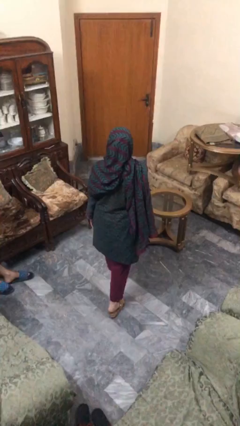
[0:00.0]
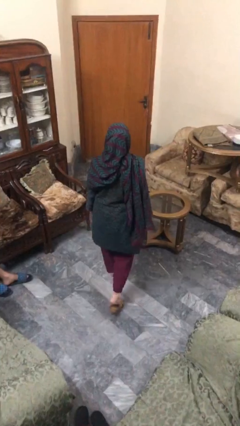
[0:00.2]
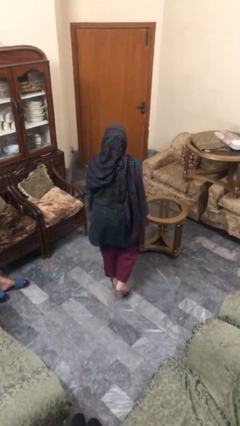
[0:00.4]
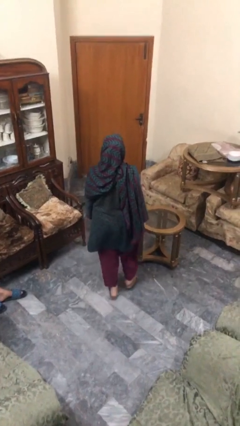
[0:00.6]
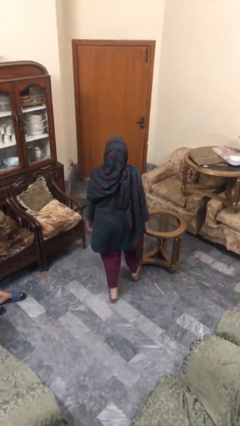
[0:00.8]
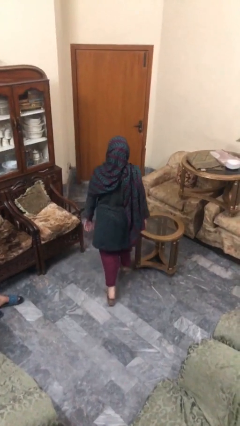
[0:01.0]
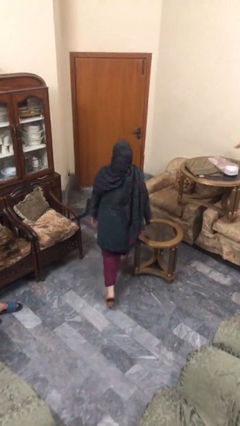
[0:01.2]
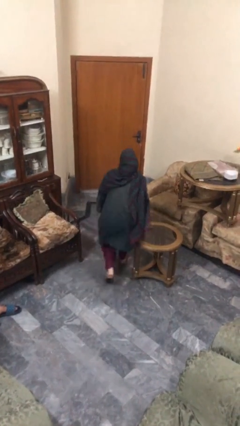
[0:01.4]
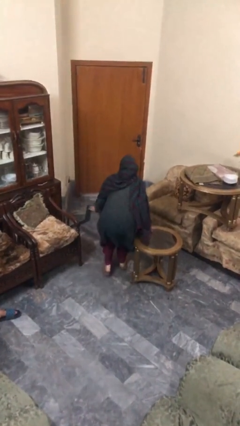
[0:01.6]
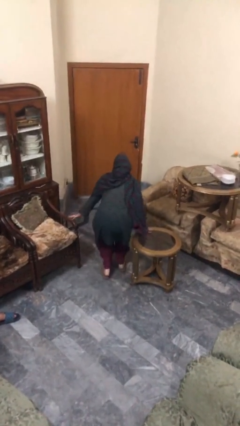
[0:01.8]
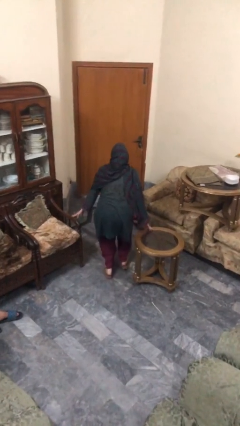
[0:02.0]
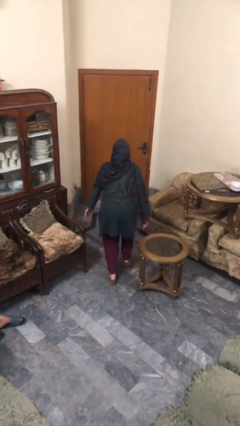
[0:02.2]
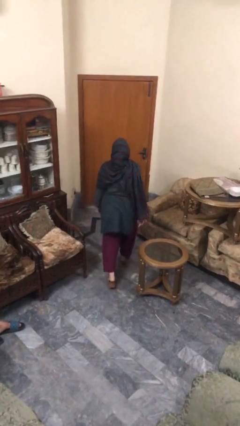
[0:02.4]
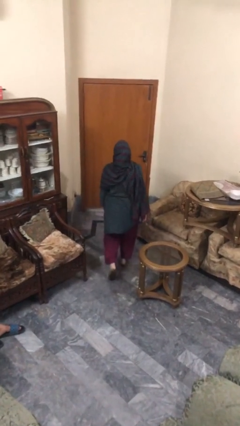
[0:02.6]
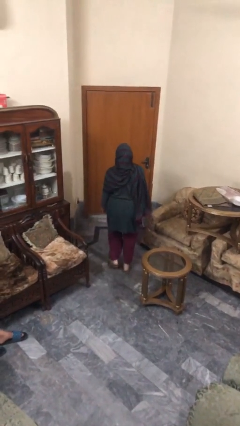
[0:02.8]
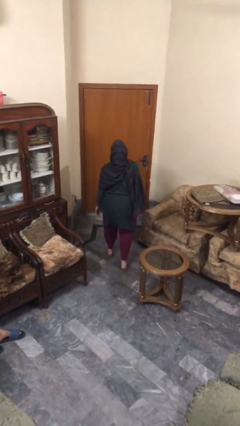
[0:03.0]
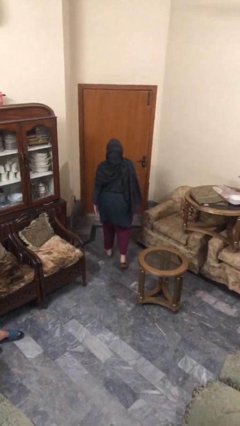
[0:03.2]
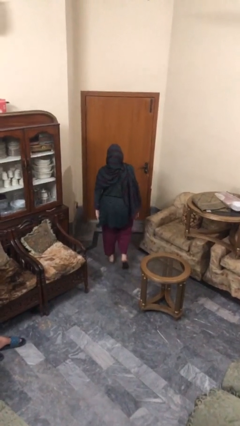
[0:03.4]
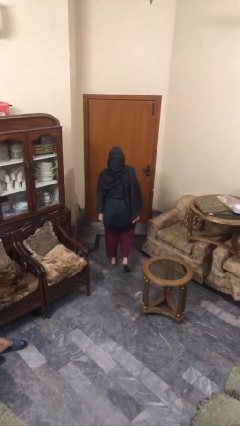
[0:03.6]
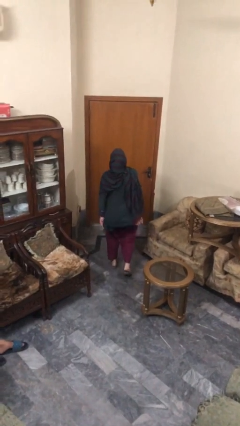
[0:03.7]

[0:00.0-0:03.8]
person bumps into table

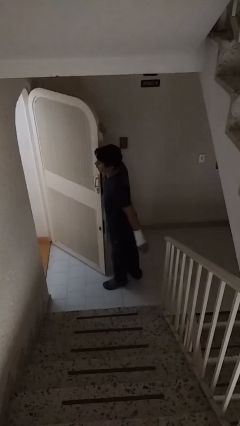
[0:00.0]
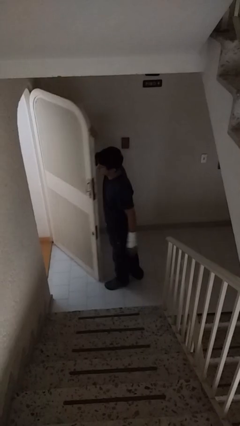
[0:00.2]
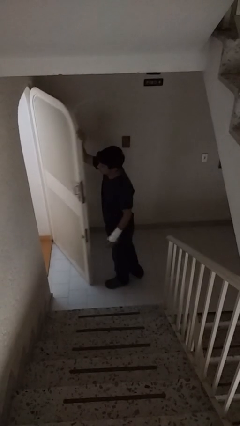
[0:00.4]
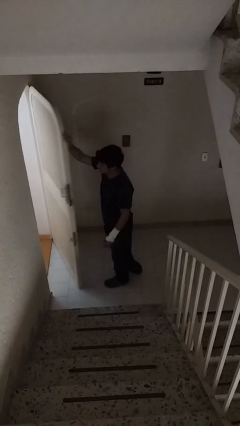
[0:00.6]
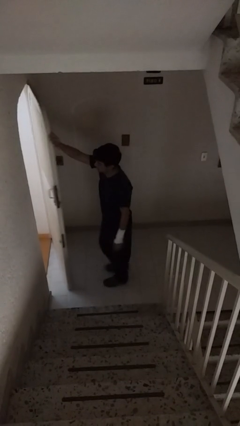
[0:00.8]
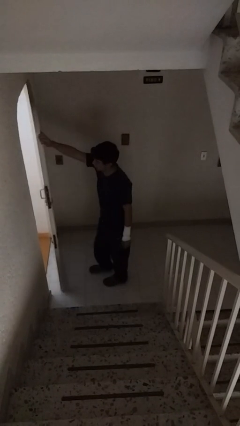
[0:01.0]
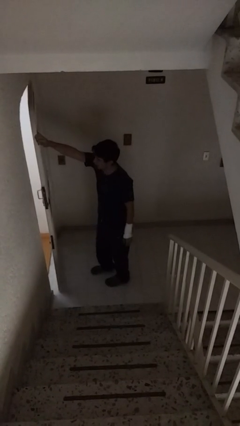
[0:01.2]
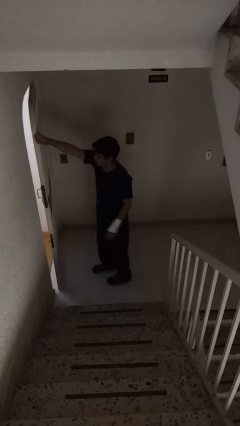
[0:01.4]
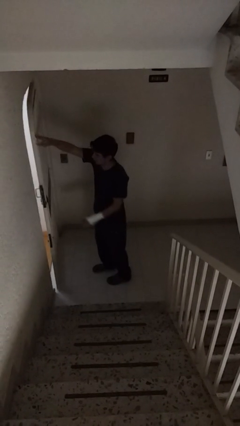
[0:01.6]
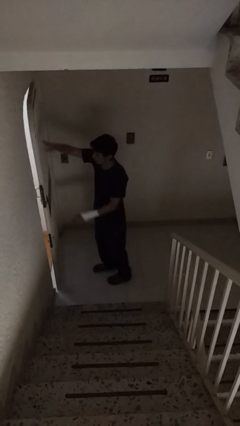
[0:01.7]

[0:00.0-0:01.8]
person closes facility door

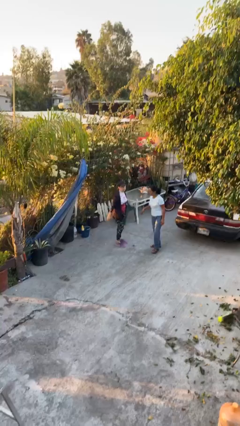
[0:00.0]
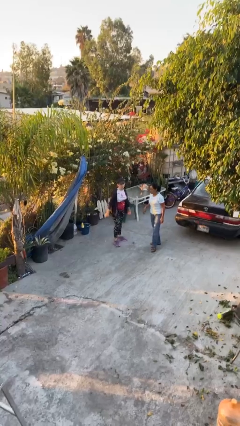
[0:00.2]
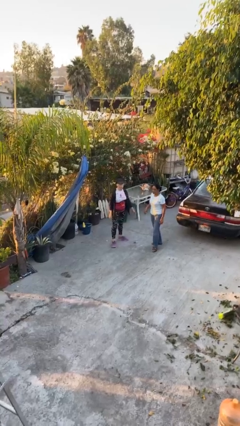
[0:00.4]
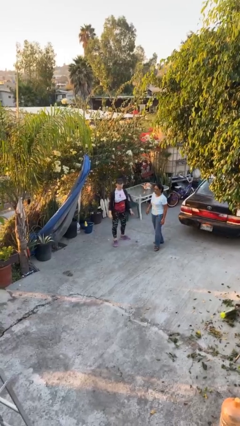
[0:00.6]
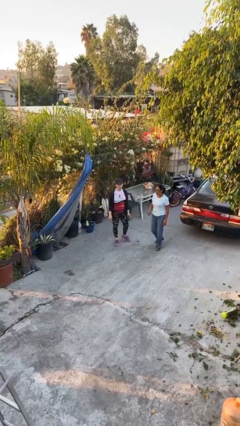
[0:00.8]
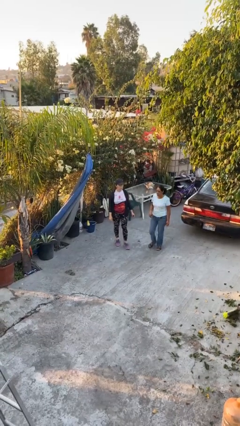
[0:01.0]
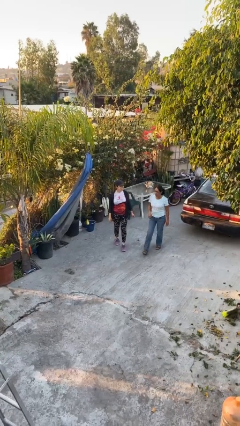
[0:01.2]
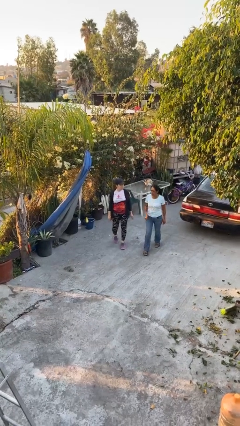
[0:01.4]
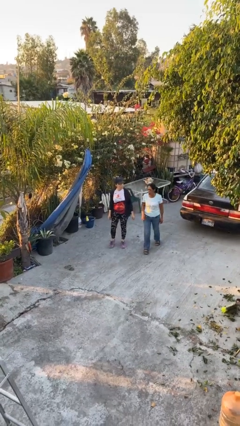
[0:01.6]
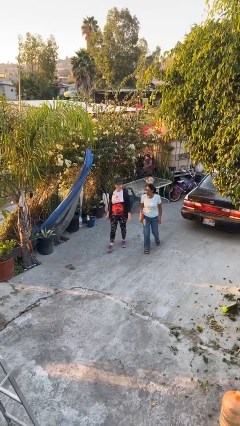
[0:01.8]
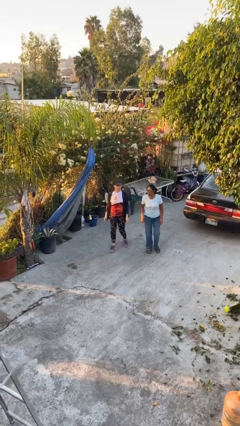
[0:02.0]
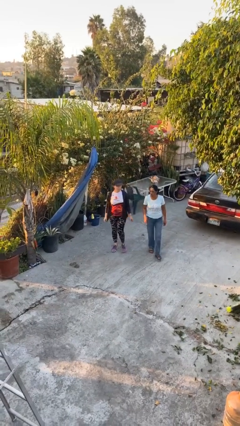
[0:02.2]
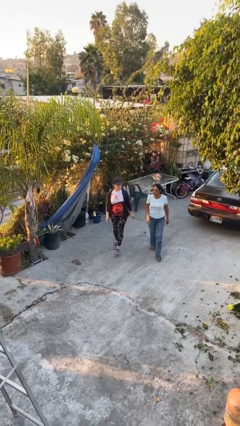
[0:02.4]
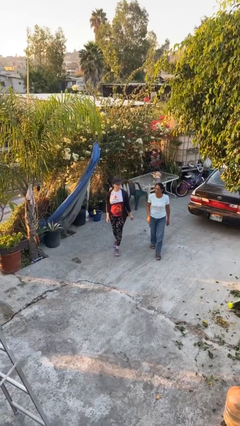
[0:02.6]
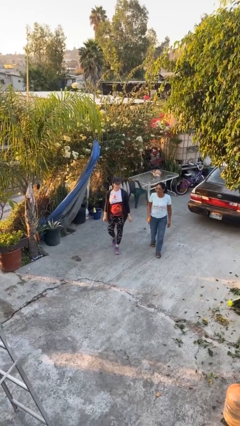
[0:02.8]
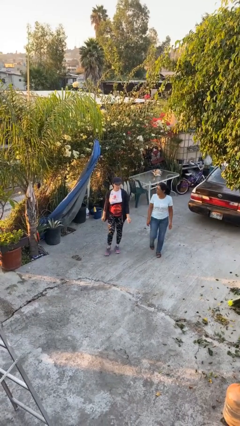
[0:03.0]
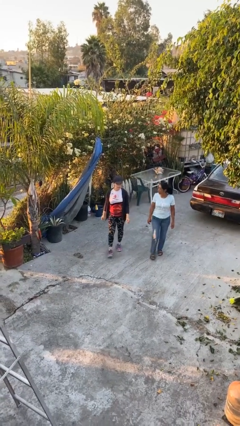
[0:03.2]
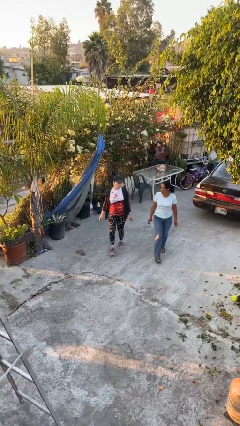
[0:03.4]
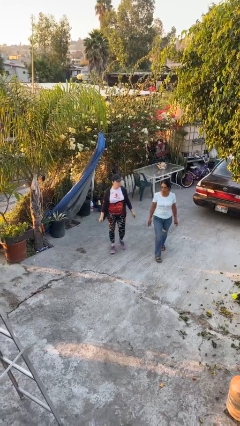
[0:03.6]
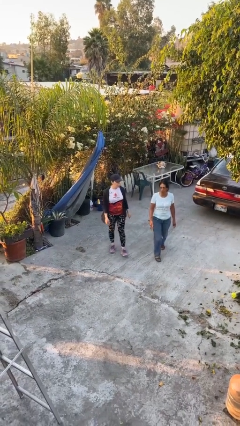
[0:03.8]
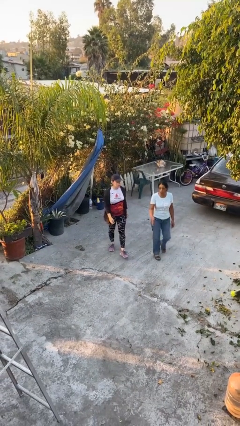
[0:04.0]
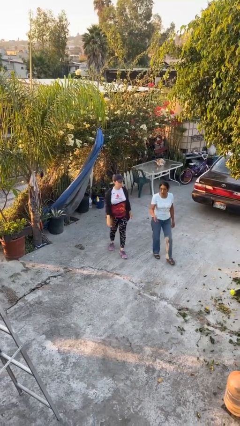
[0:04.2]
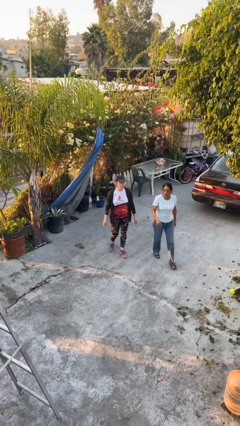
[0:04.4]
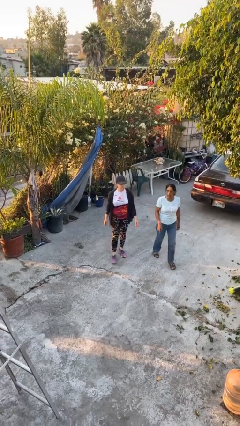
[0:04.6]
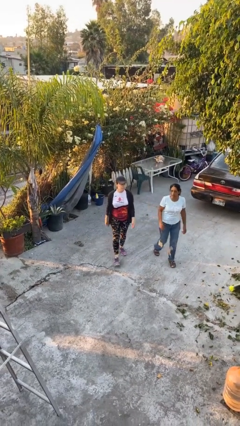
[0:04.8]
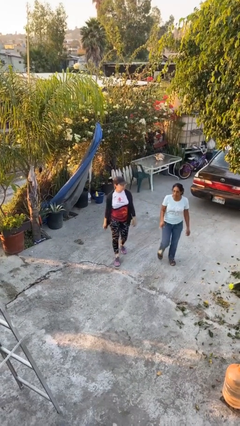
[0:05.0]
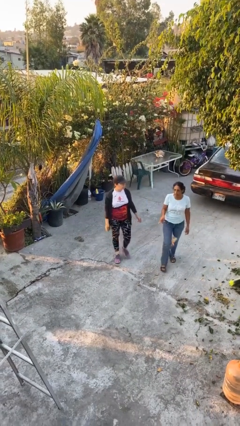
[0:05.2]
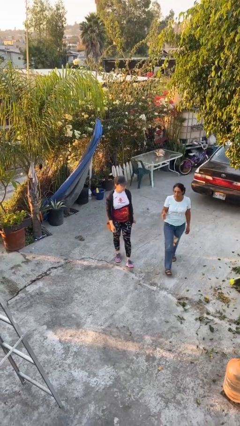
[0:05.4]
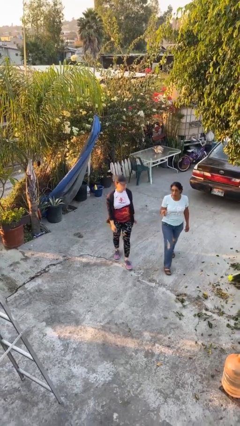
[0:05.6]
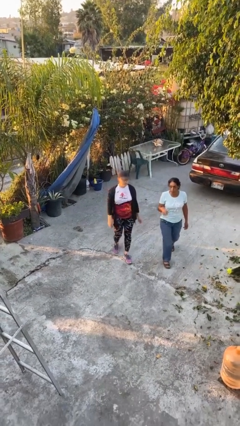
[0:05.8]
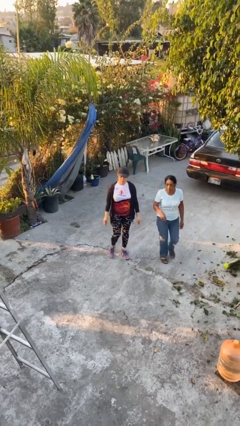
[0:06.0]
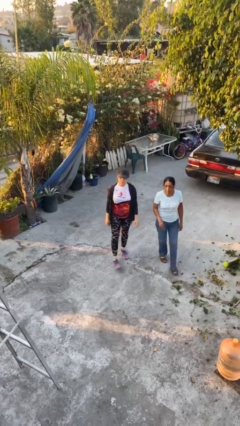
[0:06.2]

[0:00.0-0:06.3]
person talks to person

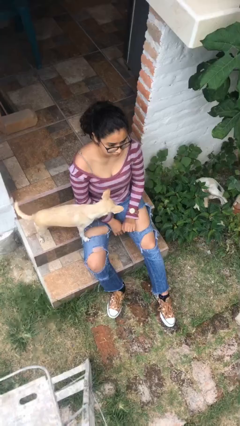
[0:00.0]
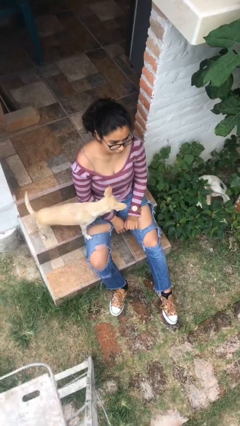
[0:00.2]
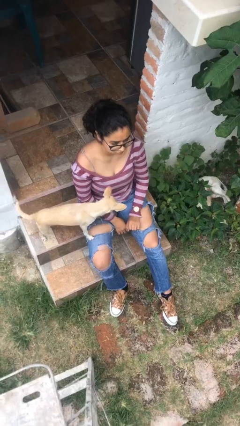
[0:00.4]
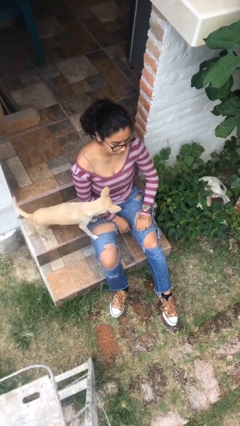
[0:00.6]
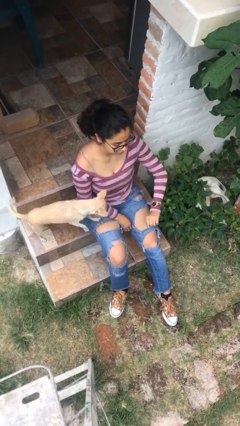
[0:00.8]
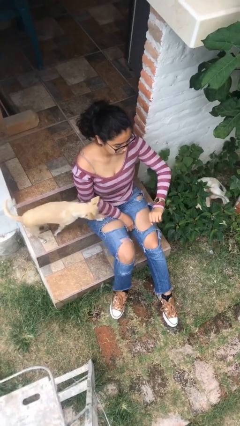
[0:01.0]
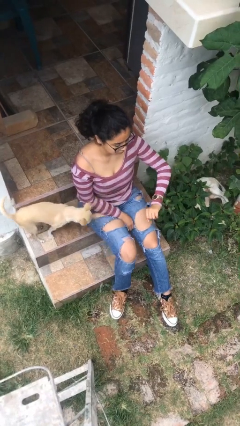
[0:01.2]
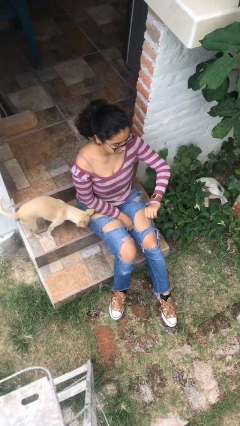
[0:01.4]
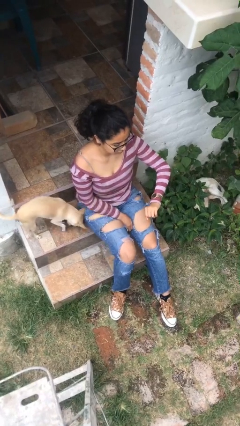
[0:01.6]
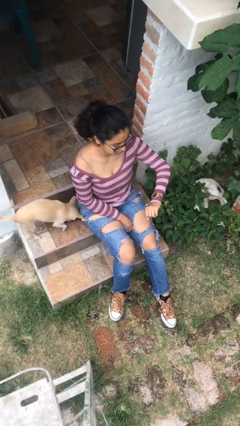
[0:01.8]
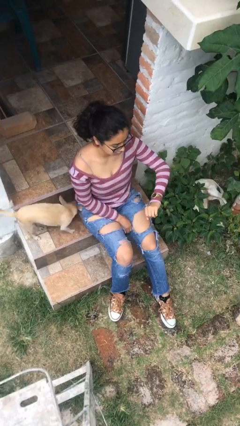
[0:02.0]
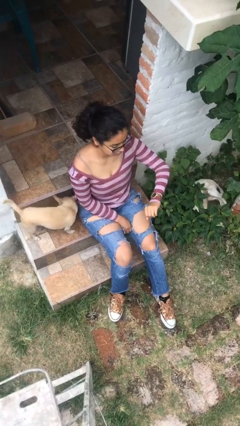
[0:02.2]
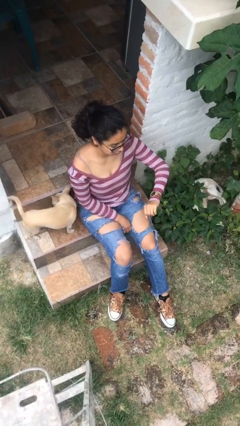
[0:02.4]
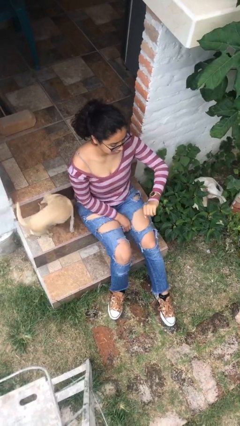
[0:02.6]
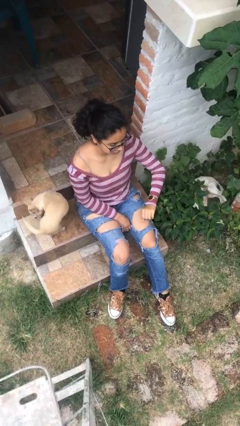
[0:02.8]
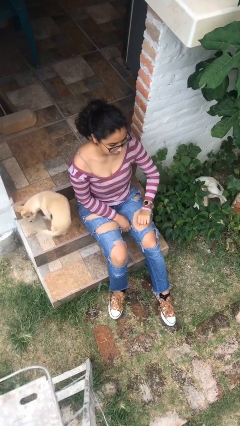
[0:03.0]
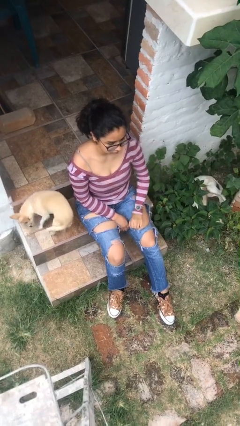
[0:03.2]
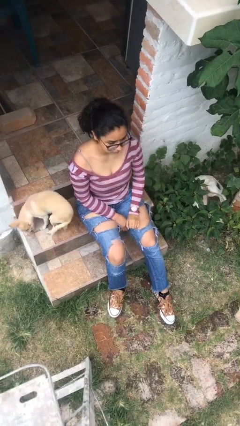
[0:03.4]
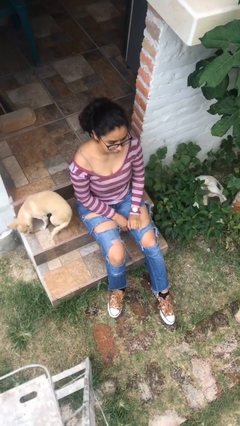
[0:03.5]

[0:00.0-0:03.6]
person looks at wristwatch

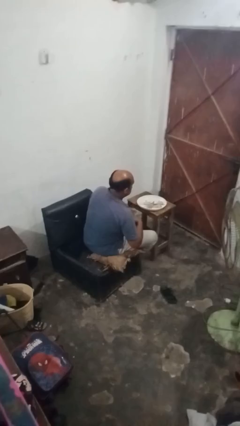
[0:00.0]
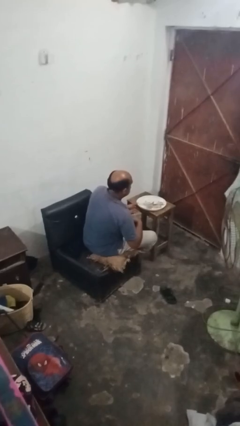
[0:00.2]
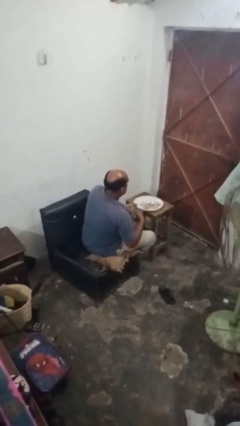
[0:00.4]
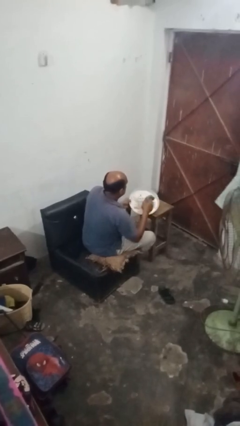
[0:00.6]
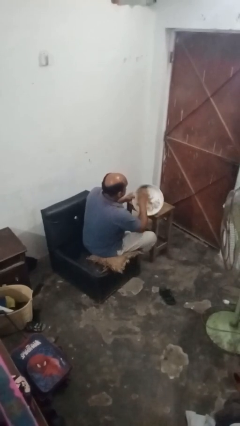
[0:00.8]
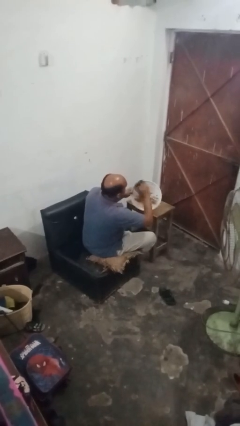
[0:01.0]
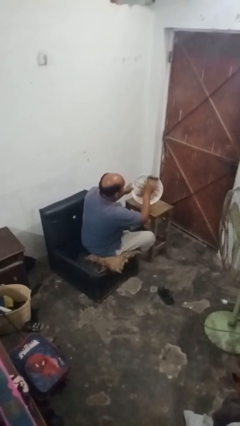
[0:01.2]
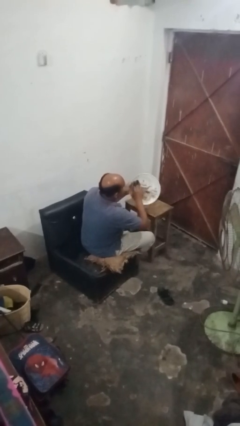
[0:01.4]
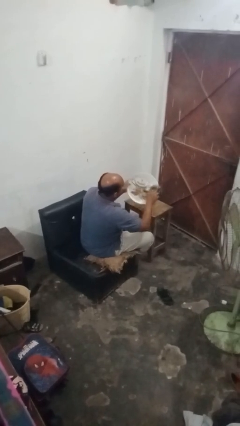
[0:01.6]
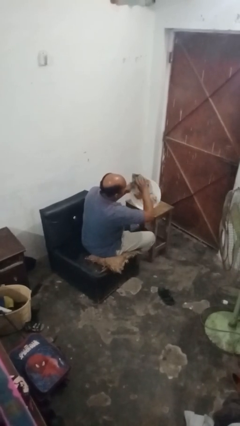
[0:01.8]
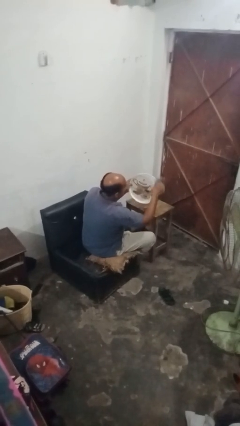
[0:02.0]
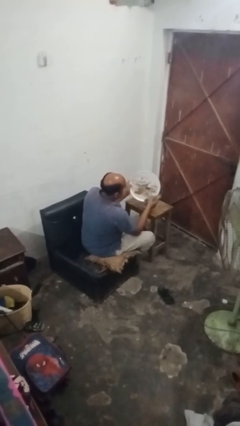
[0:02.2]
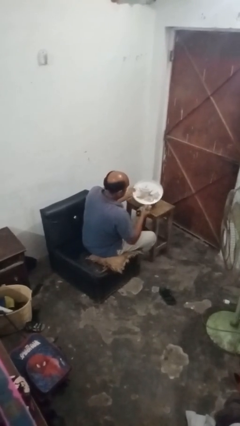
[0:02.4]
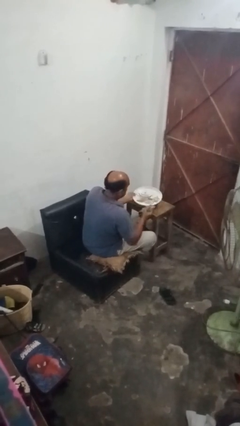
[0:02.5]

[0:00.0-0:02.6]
person dries dish
